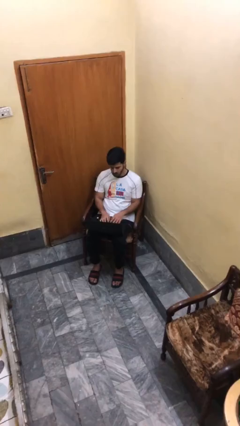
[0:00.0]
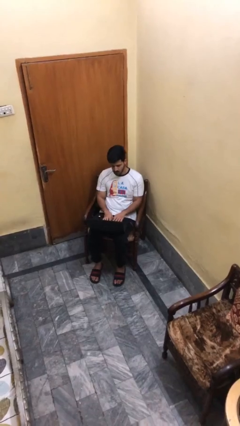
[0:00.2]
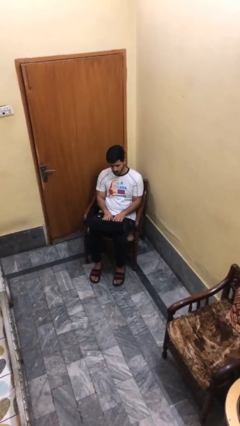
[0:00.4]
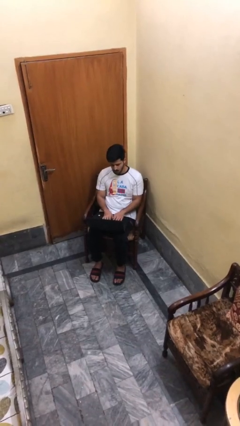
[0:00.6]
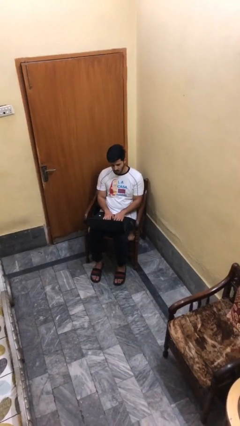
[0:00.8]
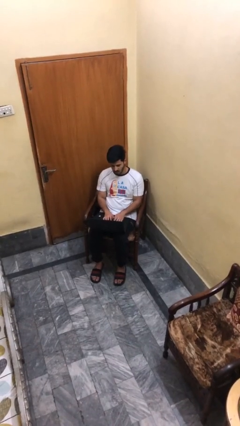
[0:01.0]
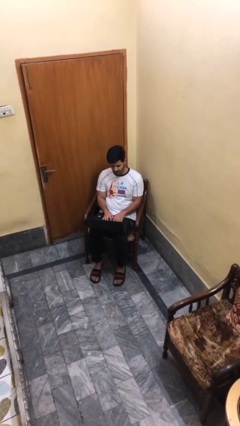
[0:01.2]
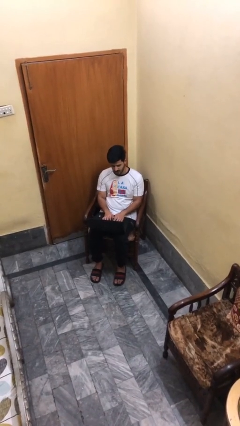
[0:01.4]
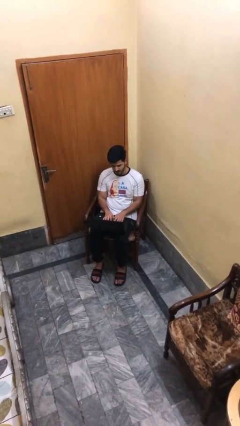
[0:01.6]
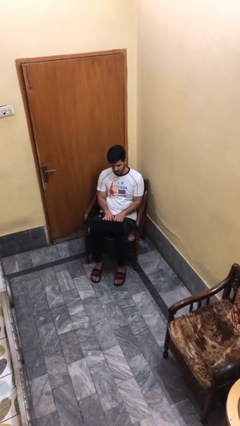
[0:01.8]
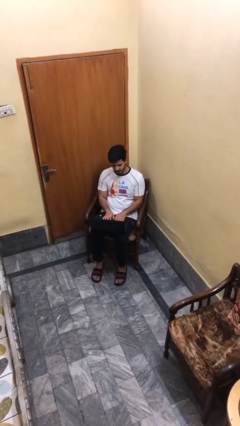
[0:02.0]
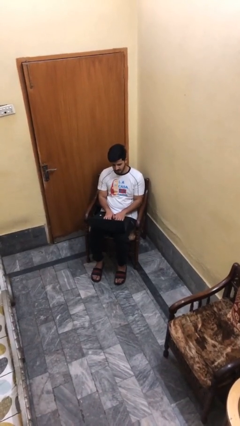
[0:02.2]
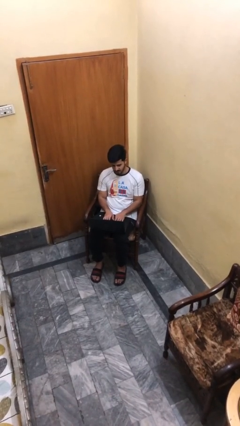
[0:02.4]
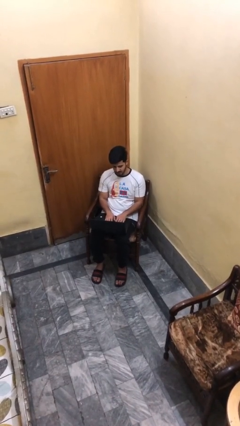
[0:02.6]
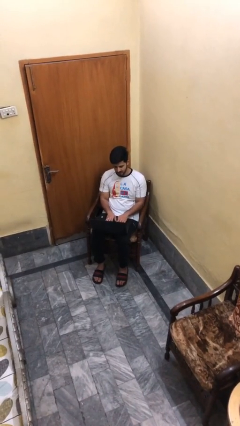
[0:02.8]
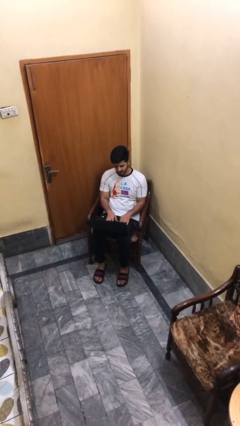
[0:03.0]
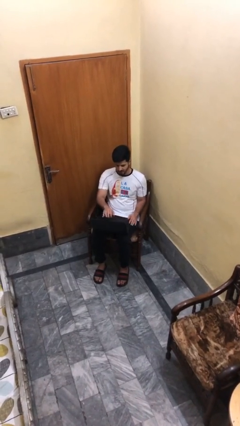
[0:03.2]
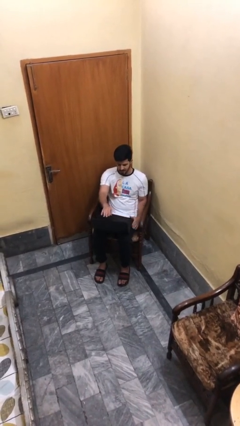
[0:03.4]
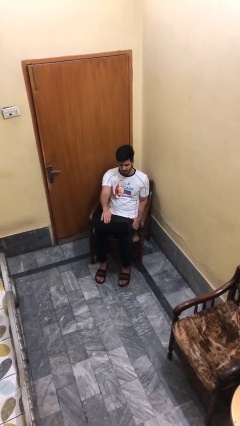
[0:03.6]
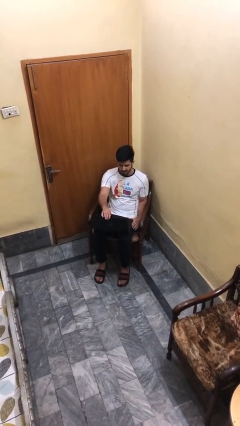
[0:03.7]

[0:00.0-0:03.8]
person interacts with laptop

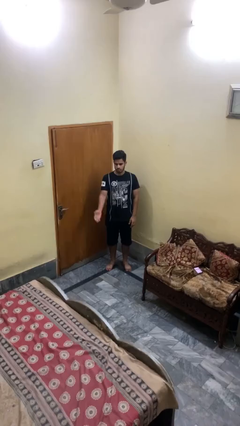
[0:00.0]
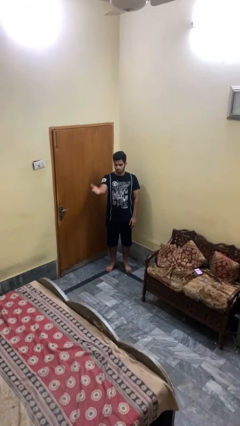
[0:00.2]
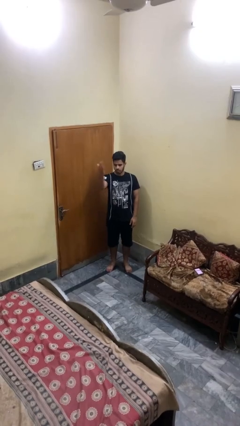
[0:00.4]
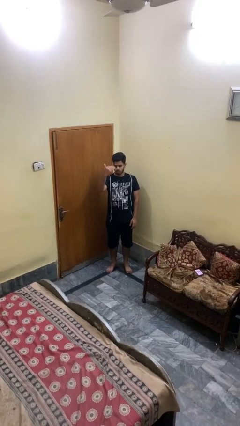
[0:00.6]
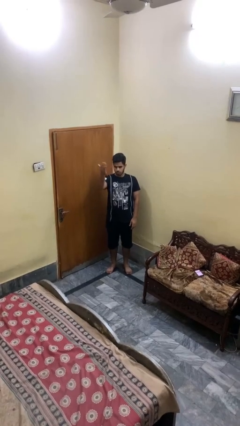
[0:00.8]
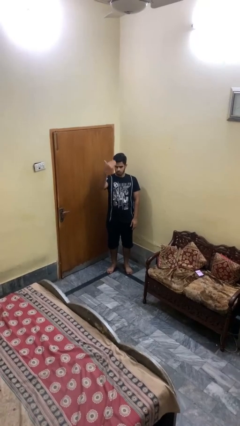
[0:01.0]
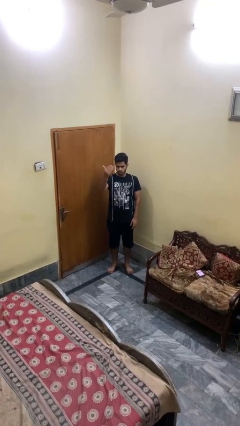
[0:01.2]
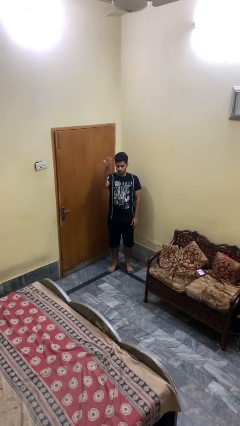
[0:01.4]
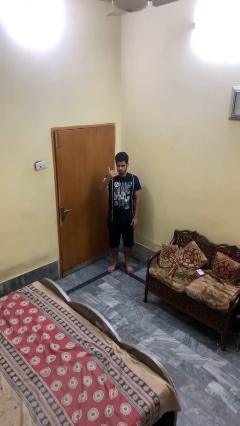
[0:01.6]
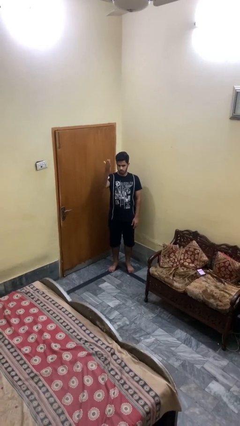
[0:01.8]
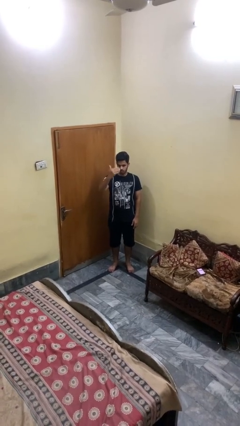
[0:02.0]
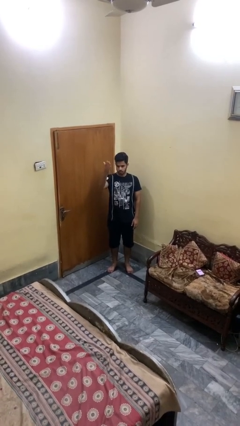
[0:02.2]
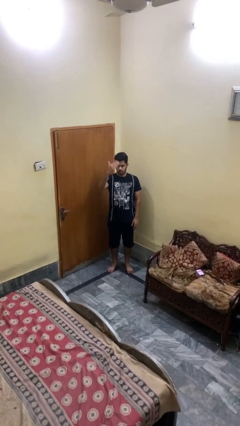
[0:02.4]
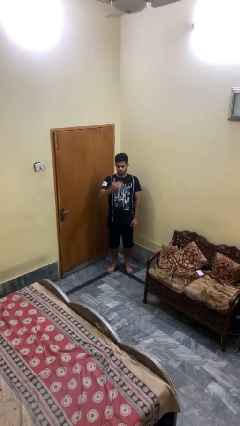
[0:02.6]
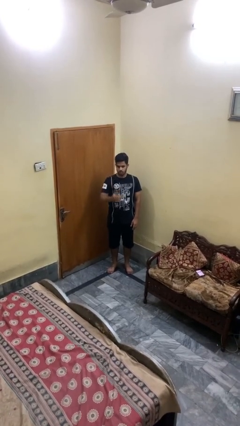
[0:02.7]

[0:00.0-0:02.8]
person gestures come here

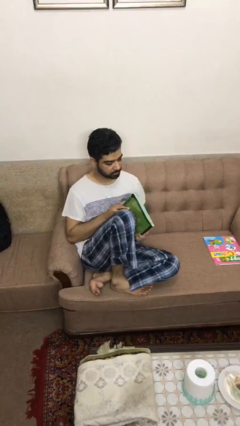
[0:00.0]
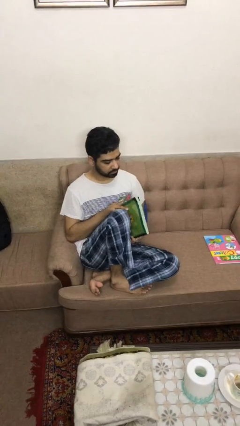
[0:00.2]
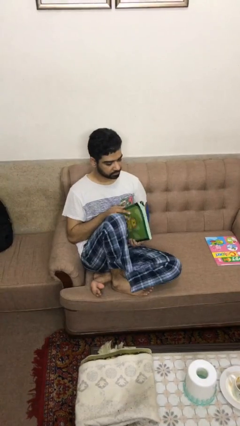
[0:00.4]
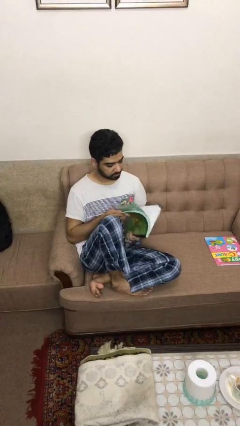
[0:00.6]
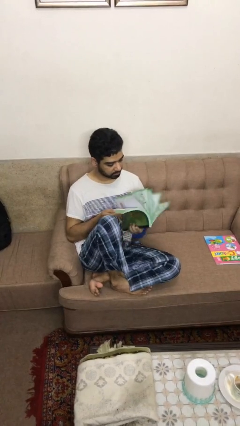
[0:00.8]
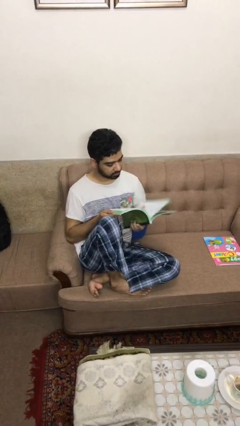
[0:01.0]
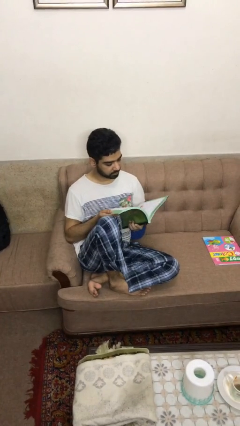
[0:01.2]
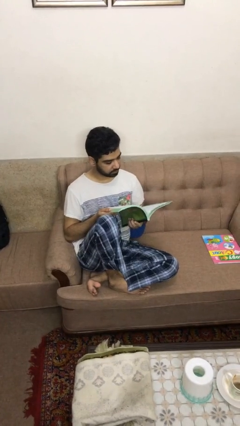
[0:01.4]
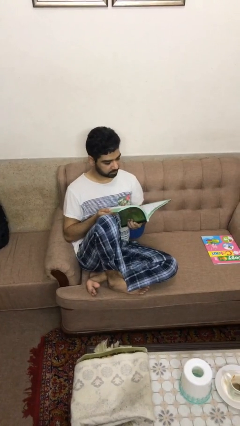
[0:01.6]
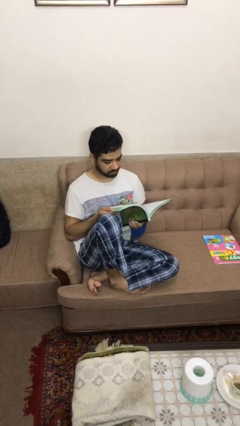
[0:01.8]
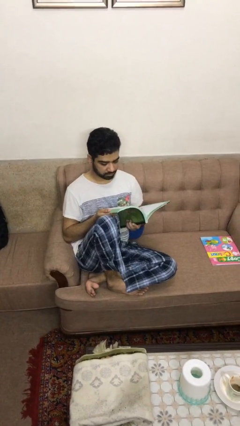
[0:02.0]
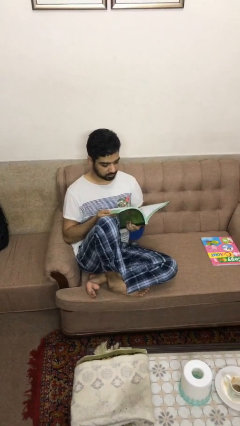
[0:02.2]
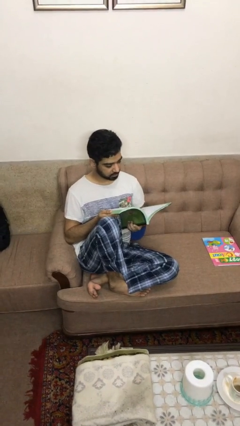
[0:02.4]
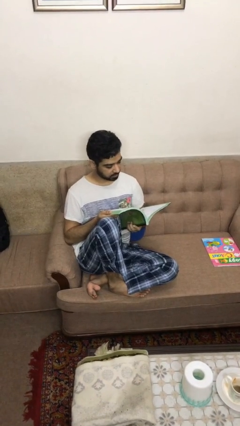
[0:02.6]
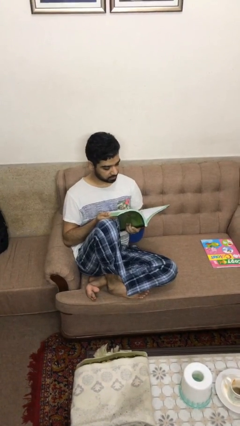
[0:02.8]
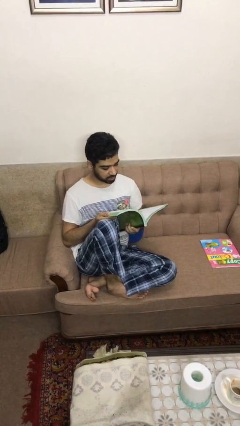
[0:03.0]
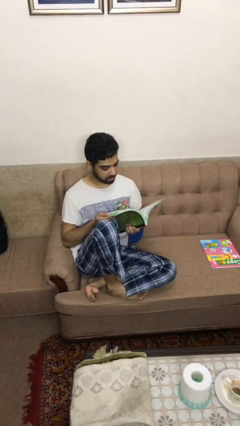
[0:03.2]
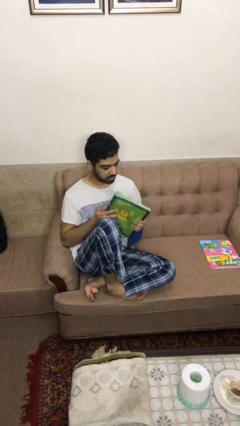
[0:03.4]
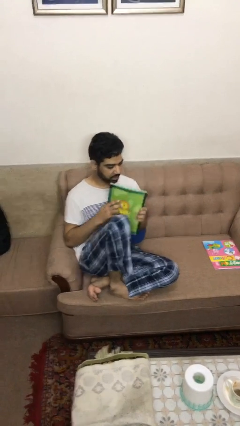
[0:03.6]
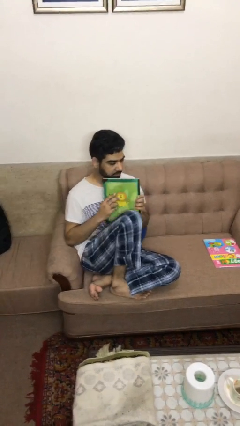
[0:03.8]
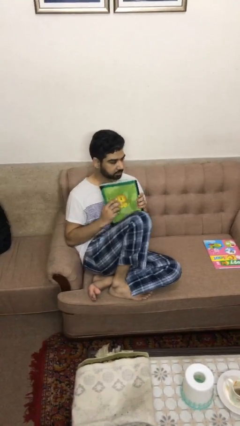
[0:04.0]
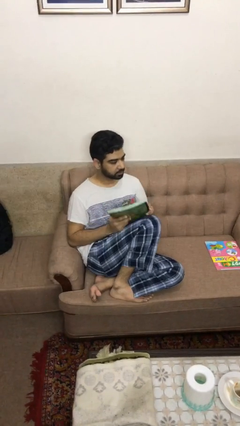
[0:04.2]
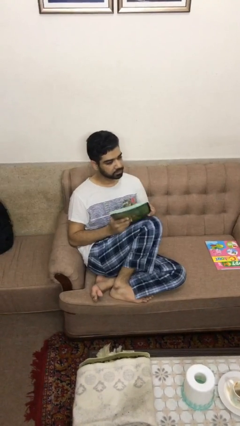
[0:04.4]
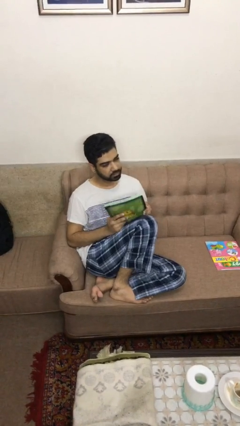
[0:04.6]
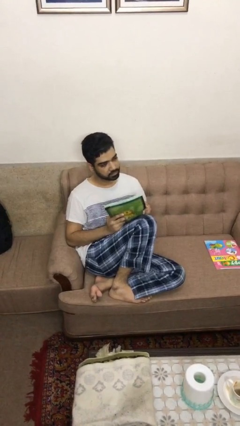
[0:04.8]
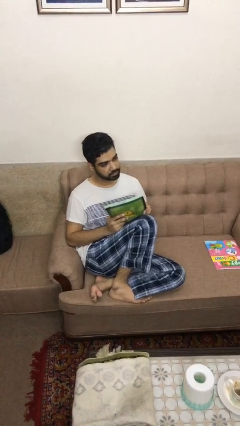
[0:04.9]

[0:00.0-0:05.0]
person reads book

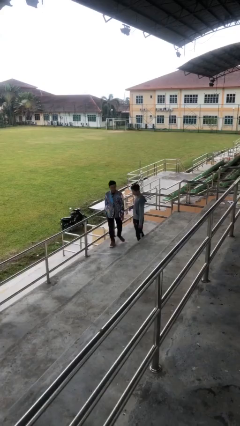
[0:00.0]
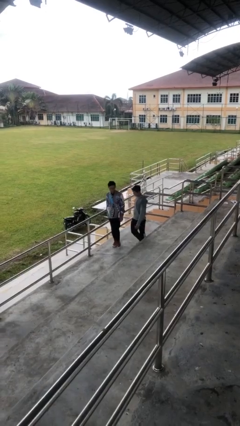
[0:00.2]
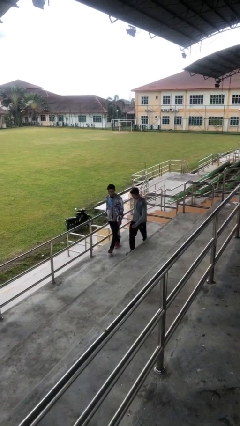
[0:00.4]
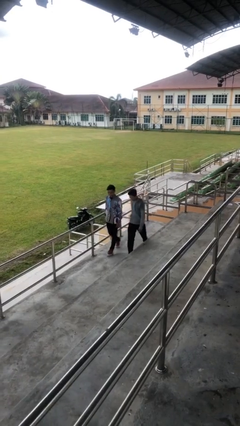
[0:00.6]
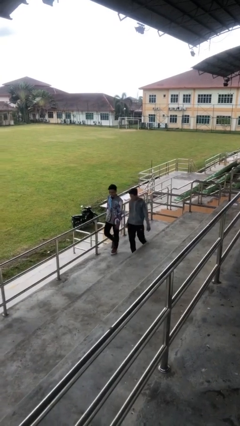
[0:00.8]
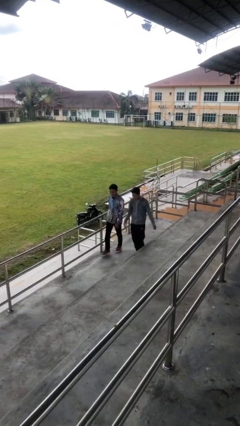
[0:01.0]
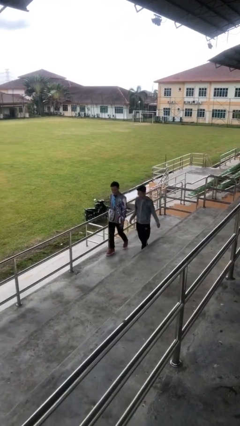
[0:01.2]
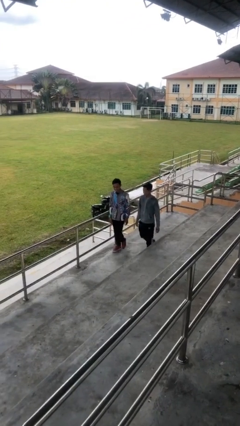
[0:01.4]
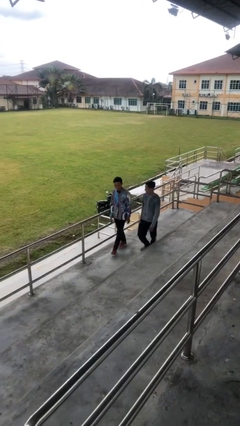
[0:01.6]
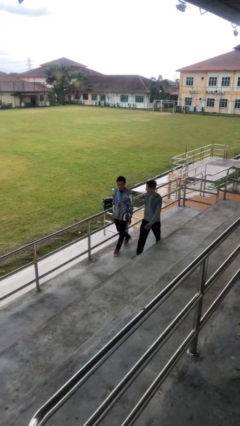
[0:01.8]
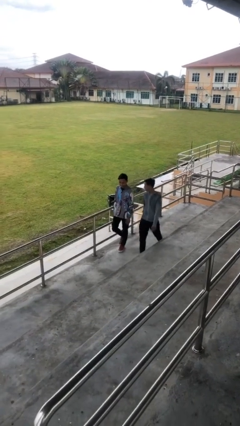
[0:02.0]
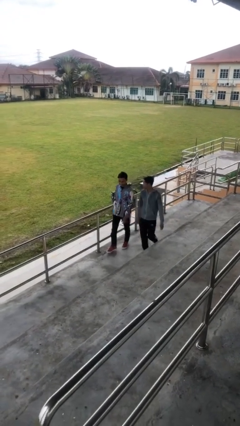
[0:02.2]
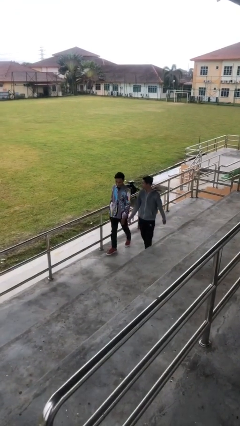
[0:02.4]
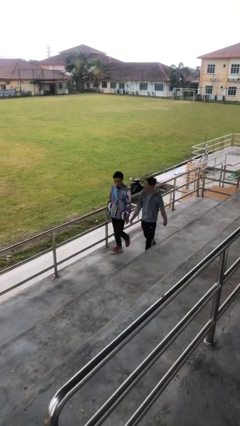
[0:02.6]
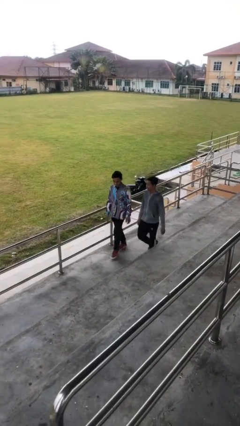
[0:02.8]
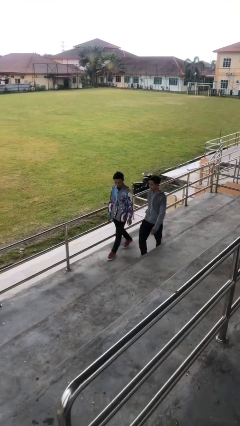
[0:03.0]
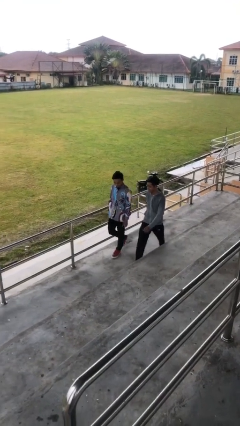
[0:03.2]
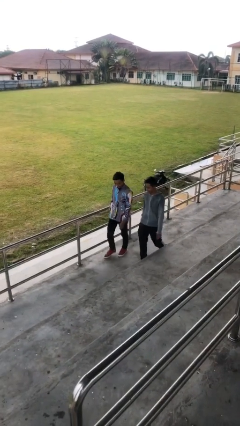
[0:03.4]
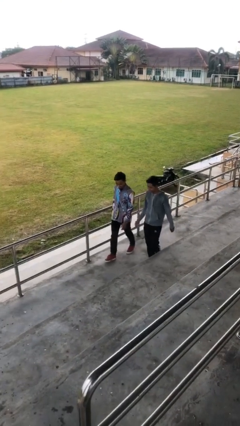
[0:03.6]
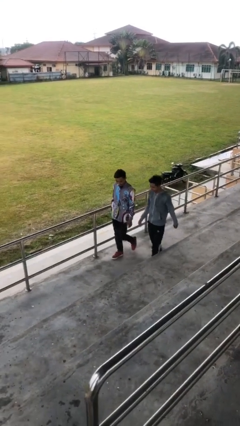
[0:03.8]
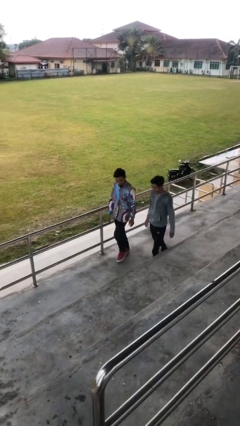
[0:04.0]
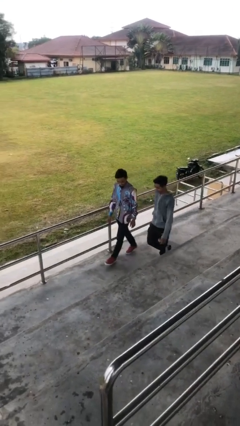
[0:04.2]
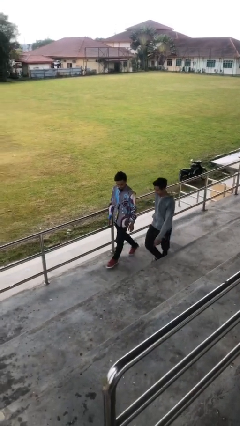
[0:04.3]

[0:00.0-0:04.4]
person talks to person

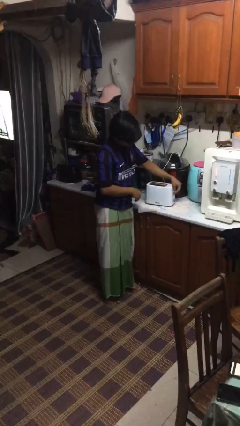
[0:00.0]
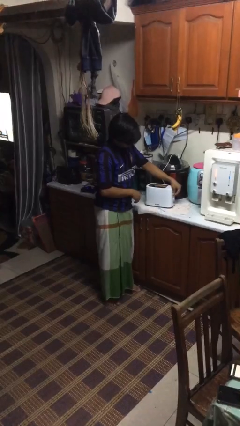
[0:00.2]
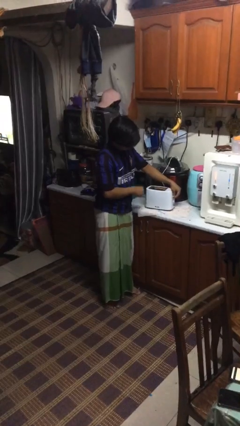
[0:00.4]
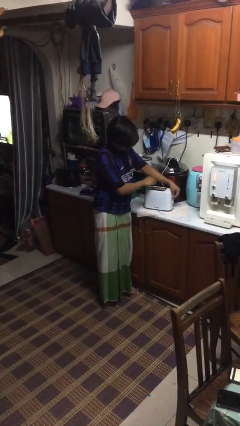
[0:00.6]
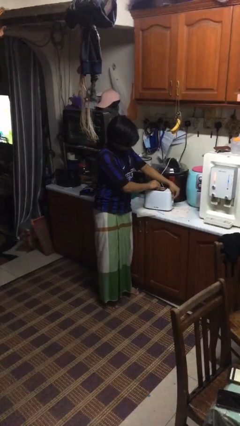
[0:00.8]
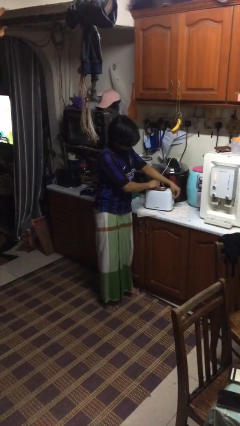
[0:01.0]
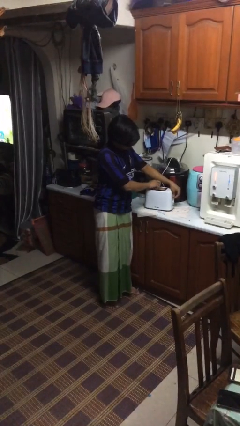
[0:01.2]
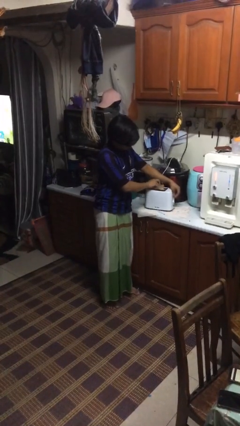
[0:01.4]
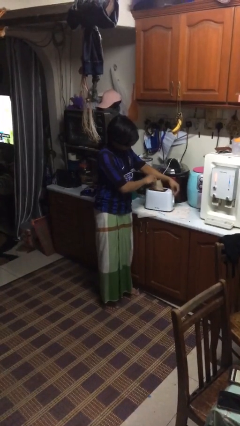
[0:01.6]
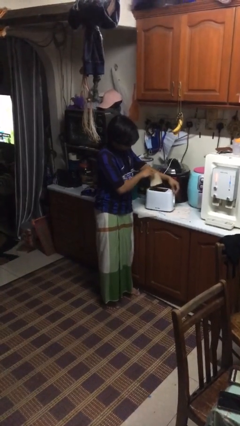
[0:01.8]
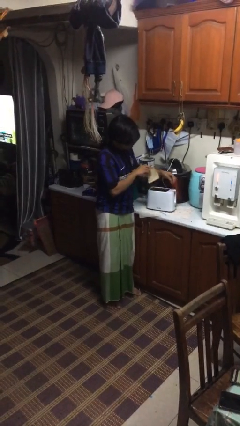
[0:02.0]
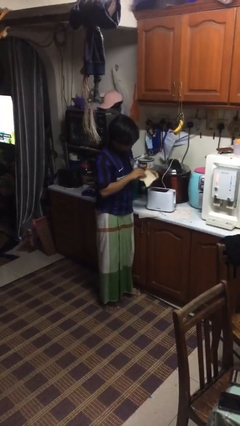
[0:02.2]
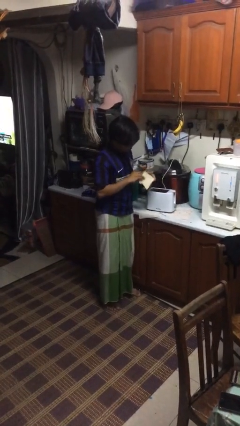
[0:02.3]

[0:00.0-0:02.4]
person takes object from toaster
